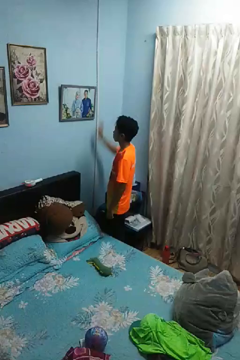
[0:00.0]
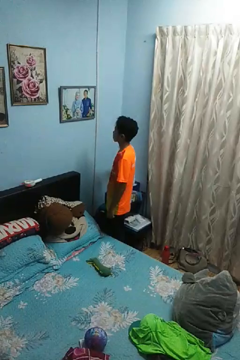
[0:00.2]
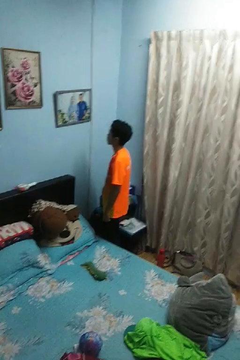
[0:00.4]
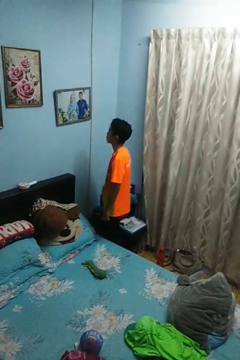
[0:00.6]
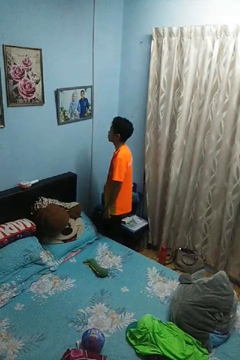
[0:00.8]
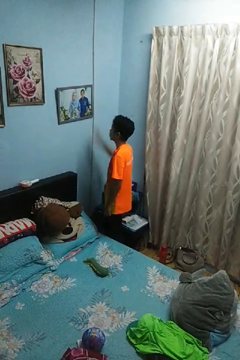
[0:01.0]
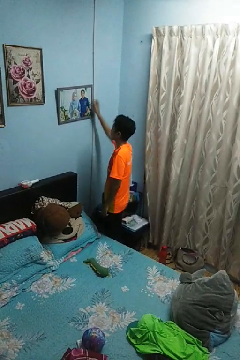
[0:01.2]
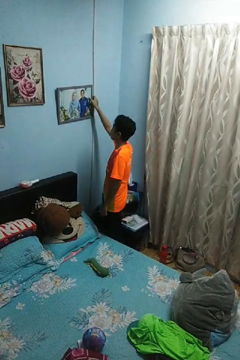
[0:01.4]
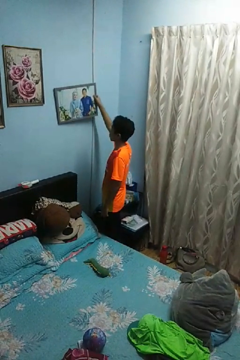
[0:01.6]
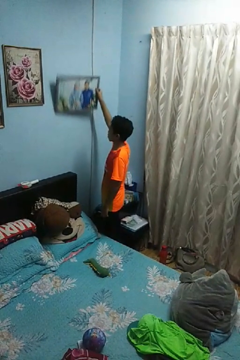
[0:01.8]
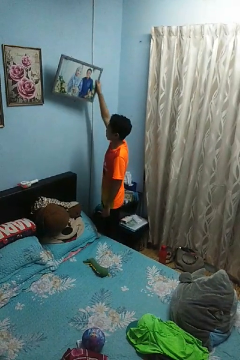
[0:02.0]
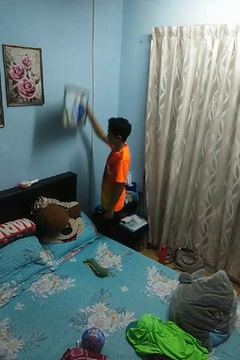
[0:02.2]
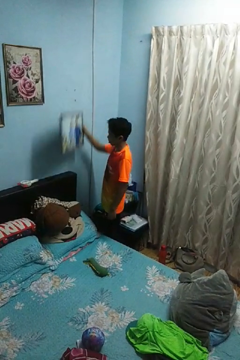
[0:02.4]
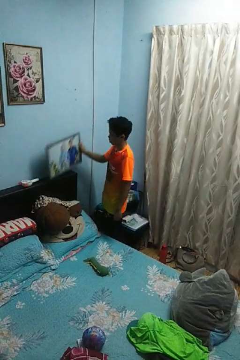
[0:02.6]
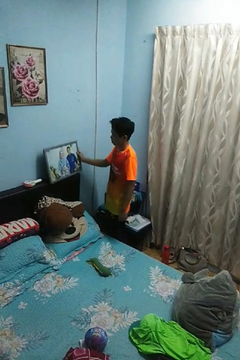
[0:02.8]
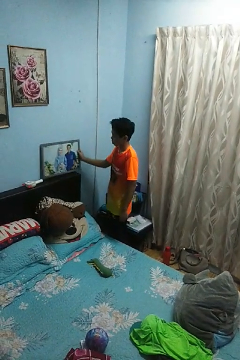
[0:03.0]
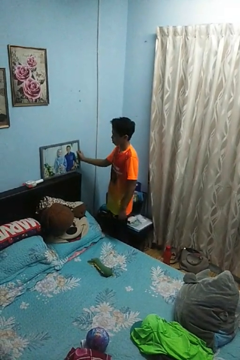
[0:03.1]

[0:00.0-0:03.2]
person takes down picture frame

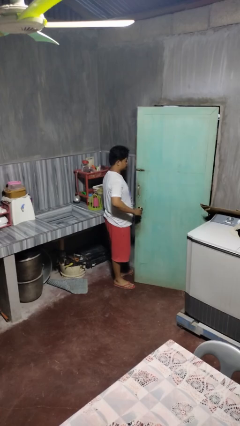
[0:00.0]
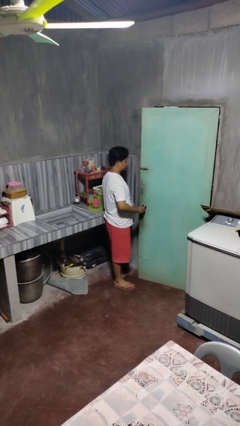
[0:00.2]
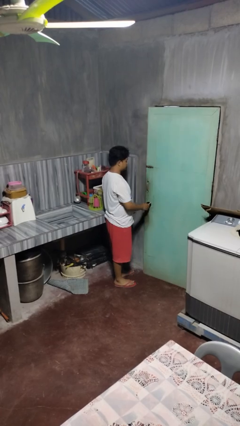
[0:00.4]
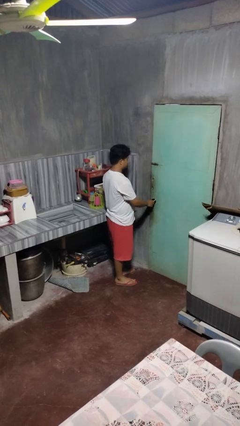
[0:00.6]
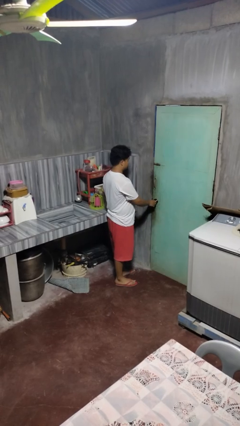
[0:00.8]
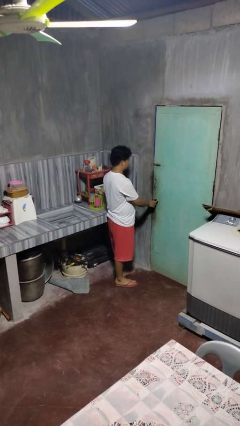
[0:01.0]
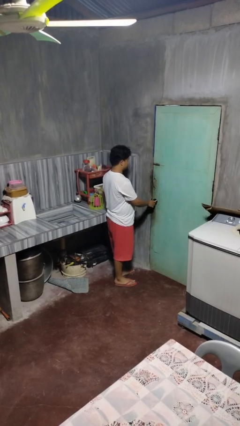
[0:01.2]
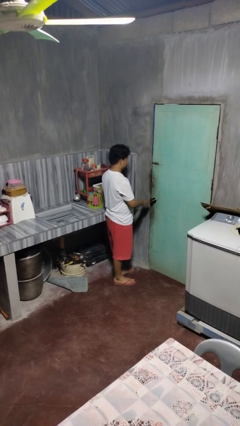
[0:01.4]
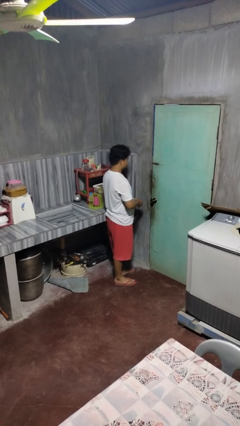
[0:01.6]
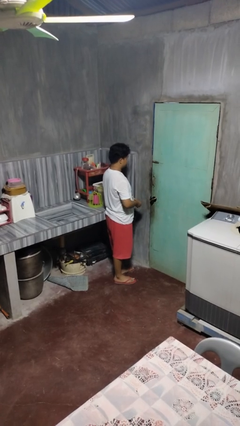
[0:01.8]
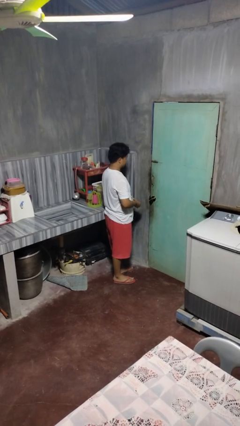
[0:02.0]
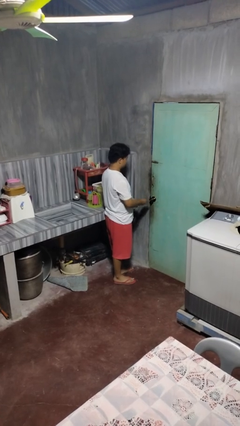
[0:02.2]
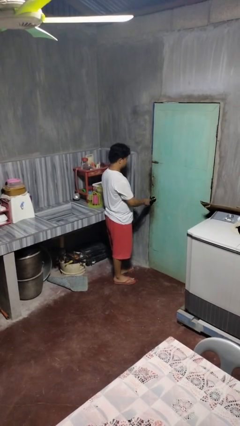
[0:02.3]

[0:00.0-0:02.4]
person closes facility door

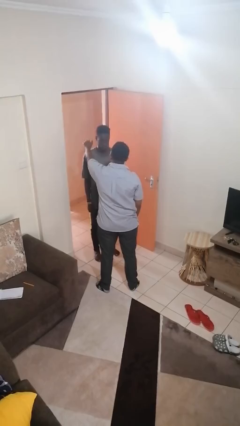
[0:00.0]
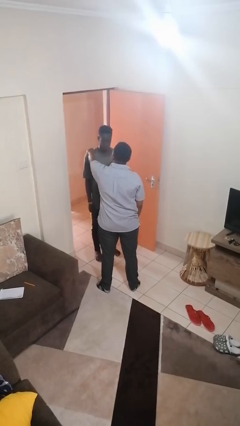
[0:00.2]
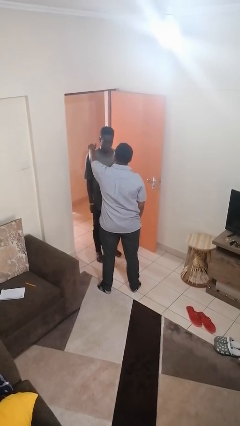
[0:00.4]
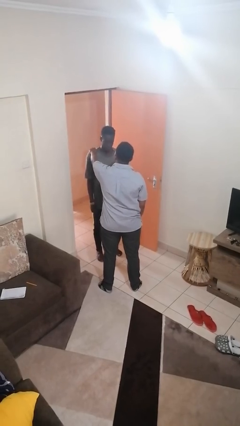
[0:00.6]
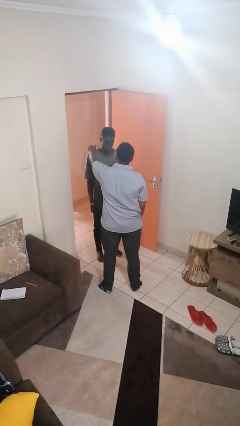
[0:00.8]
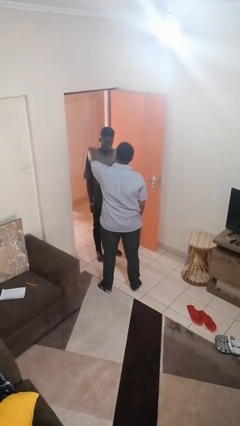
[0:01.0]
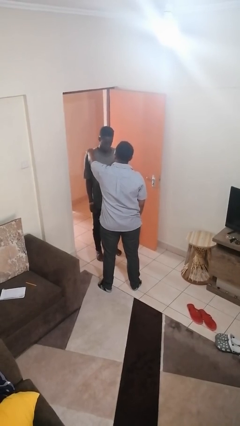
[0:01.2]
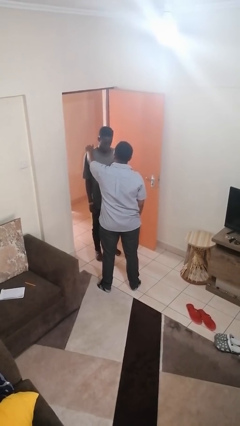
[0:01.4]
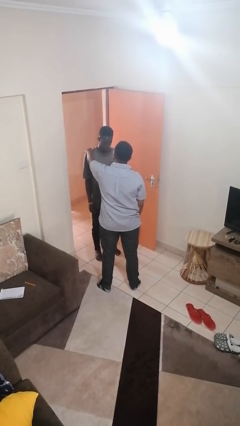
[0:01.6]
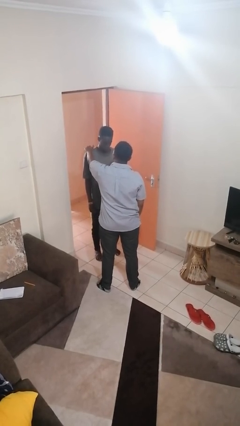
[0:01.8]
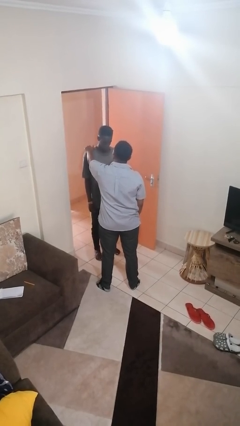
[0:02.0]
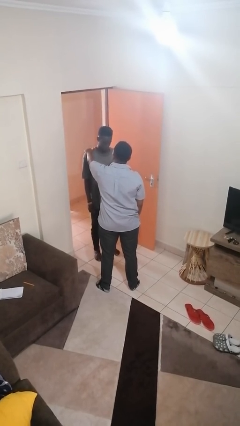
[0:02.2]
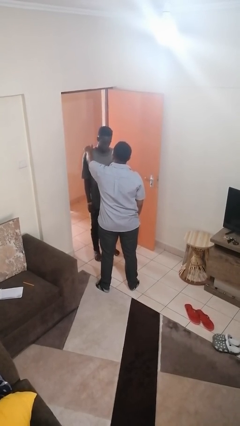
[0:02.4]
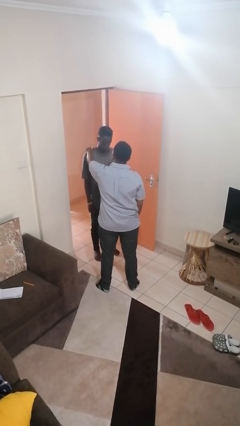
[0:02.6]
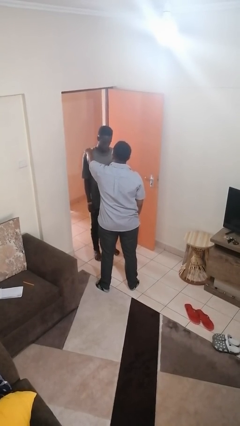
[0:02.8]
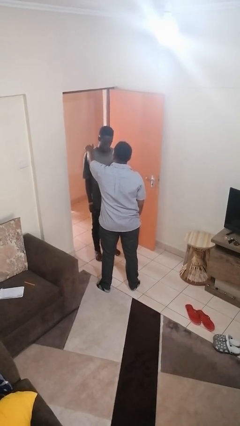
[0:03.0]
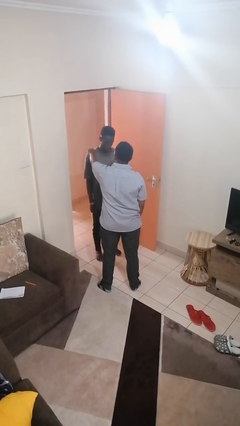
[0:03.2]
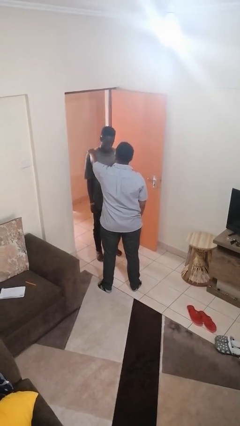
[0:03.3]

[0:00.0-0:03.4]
person pounds shoulders of person

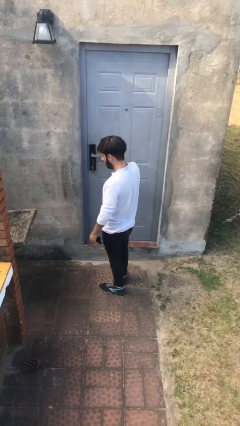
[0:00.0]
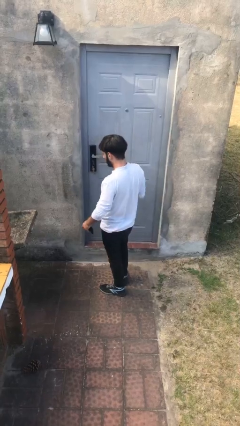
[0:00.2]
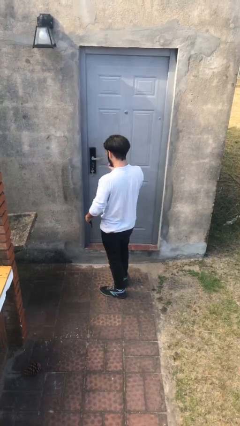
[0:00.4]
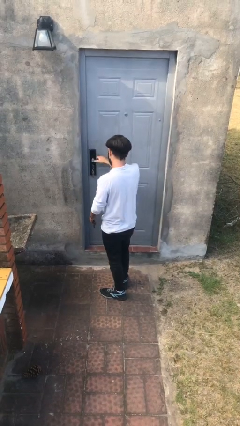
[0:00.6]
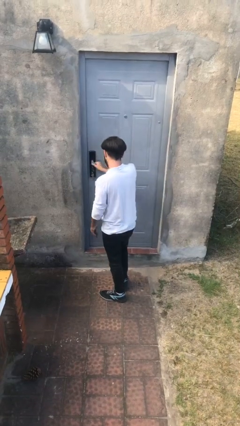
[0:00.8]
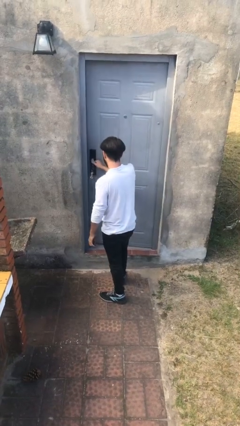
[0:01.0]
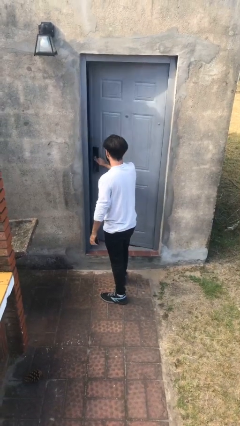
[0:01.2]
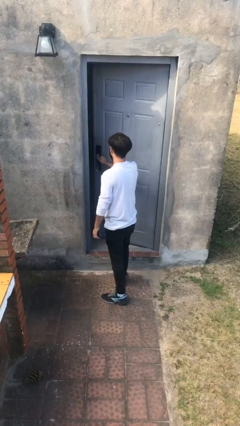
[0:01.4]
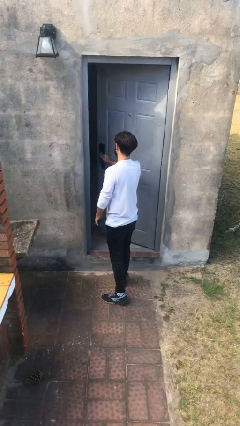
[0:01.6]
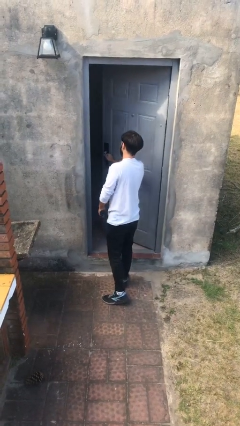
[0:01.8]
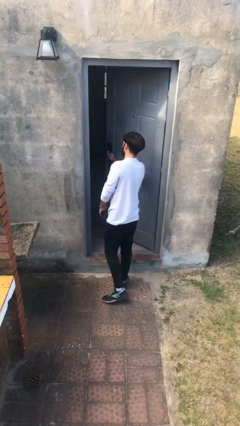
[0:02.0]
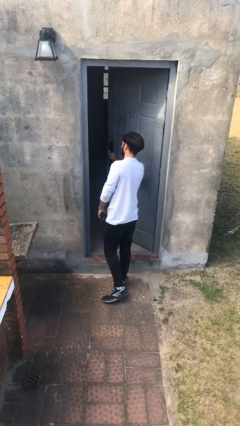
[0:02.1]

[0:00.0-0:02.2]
person opens facility door

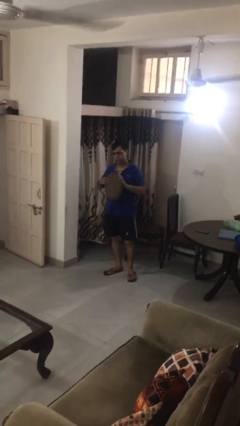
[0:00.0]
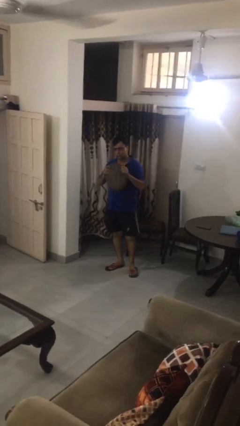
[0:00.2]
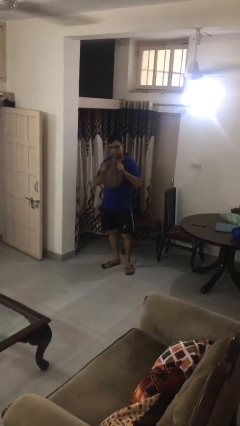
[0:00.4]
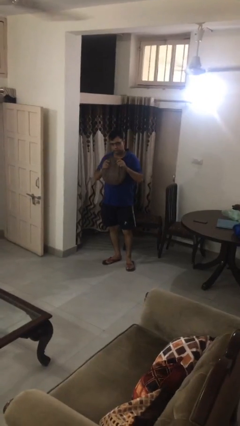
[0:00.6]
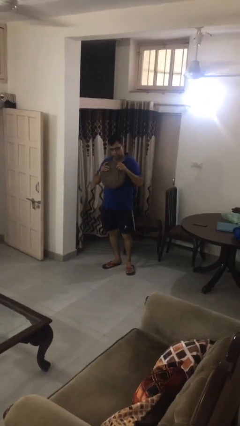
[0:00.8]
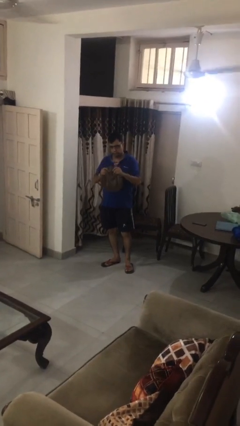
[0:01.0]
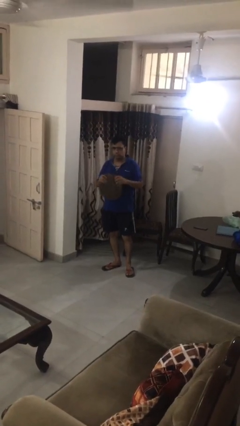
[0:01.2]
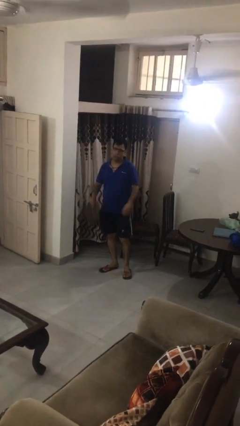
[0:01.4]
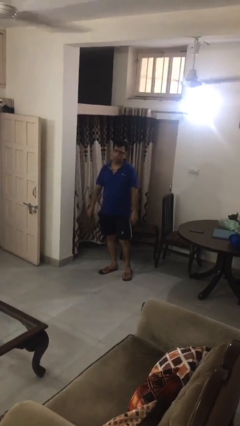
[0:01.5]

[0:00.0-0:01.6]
person squeezes object

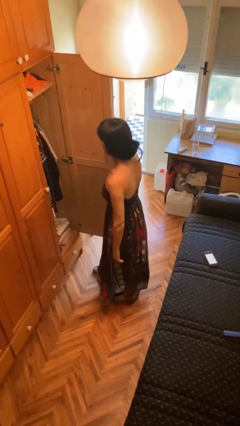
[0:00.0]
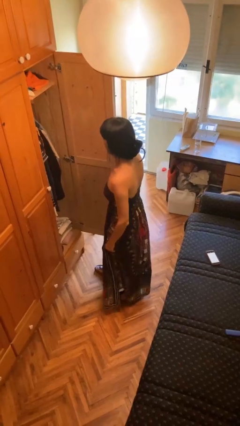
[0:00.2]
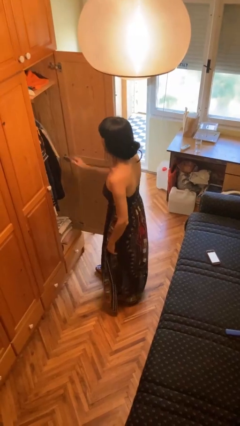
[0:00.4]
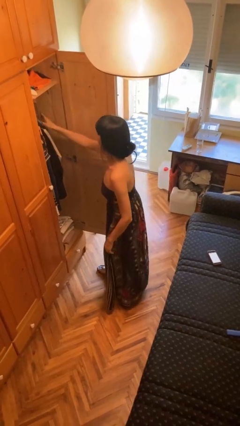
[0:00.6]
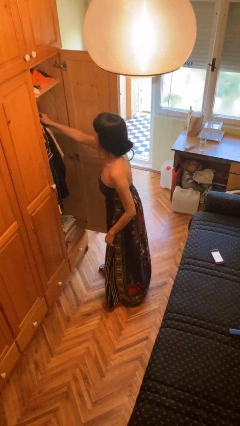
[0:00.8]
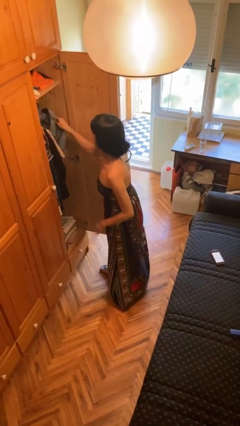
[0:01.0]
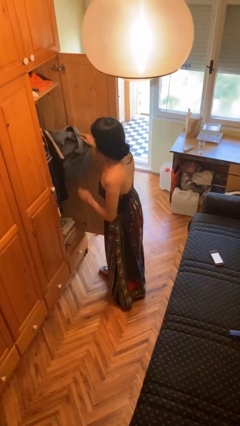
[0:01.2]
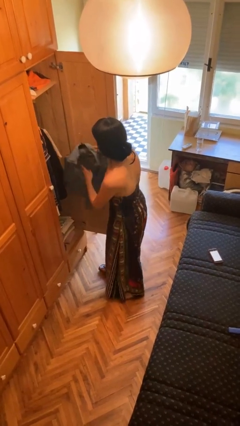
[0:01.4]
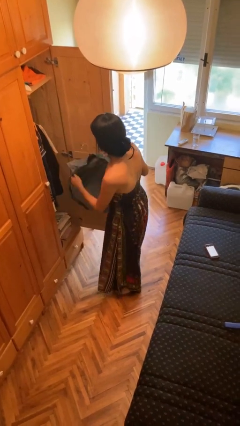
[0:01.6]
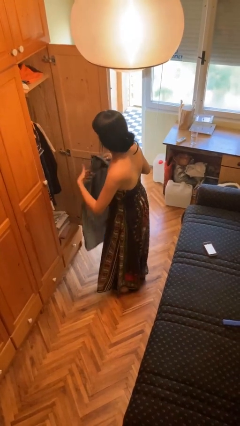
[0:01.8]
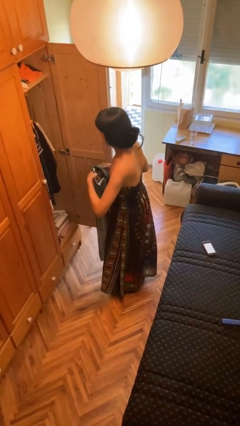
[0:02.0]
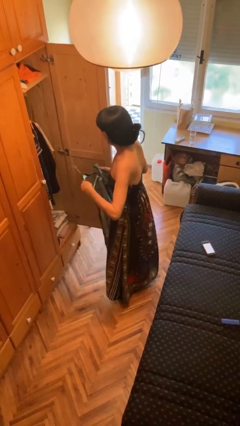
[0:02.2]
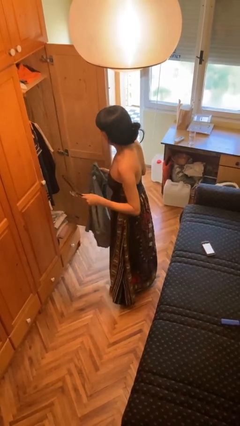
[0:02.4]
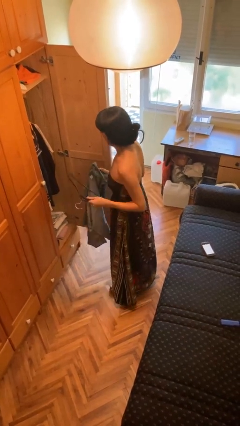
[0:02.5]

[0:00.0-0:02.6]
person takes clothes from closet

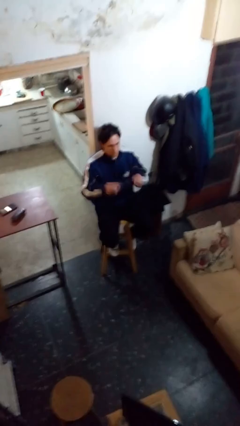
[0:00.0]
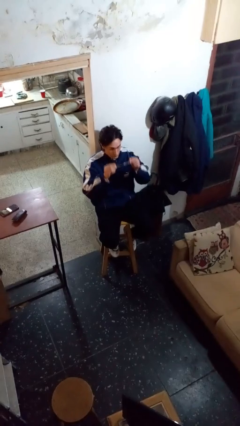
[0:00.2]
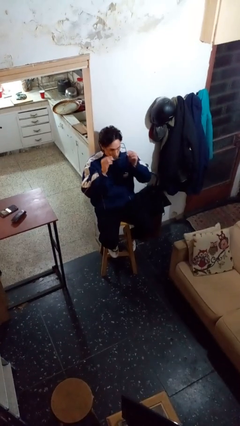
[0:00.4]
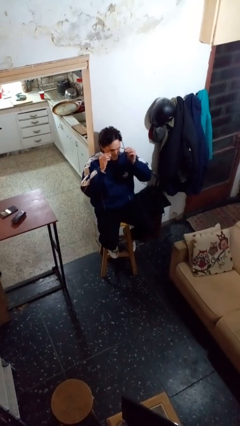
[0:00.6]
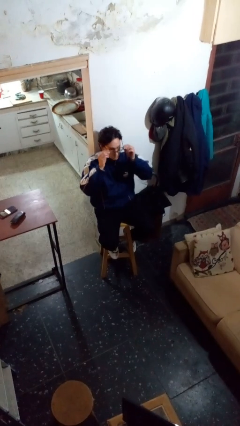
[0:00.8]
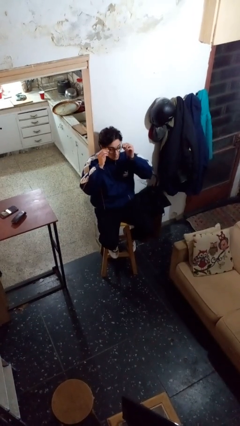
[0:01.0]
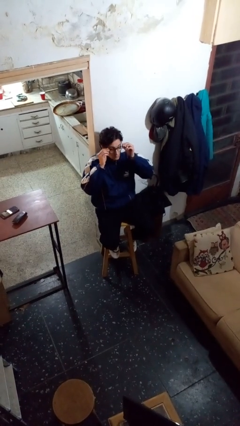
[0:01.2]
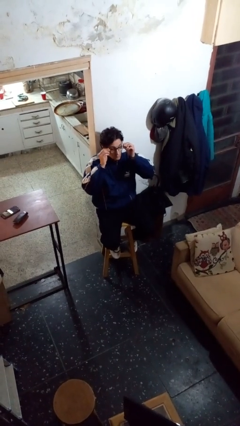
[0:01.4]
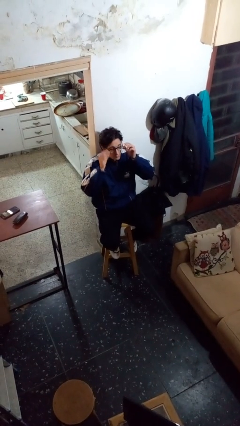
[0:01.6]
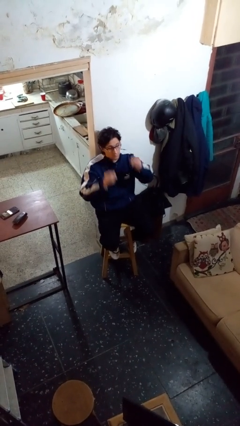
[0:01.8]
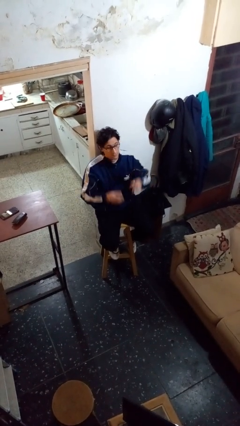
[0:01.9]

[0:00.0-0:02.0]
person puts on glasses

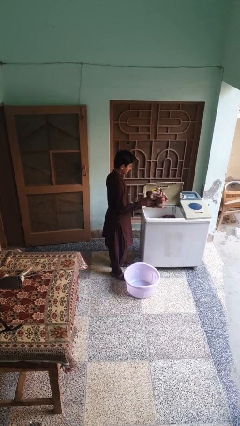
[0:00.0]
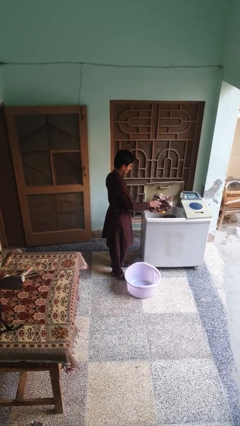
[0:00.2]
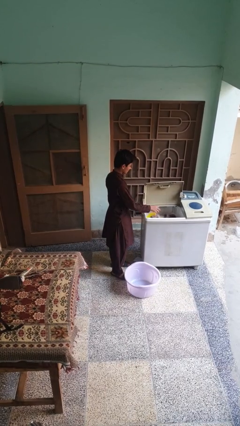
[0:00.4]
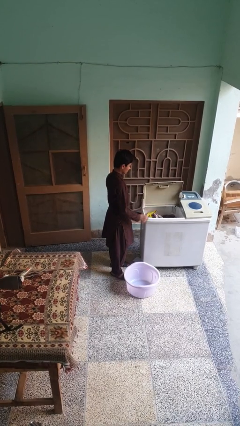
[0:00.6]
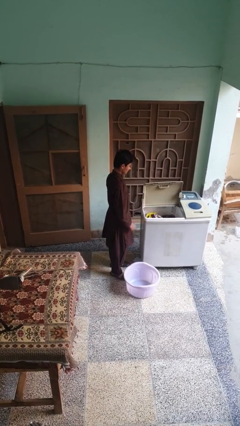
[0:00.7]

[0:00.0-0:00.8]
person unloads clotheswasher
